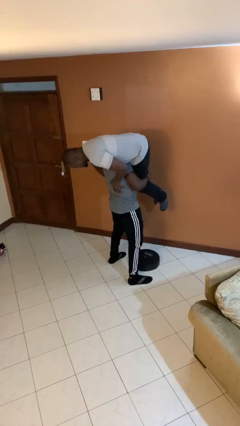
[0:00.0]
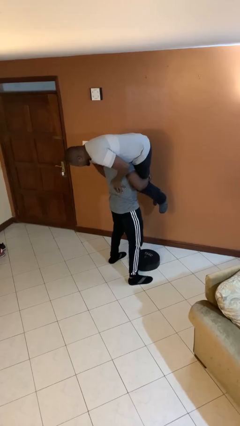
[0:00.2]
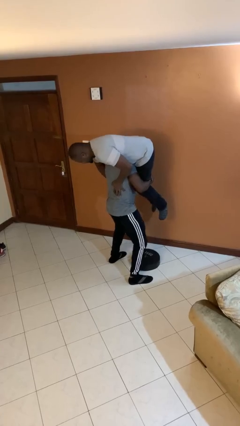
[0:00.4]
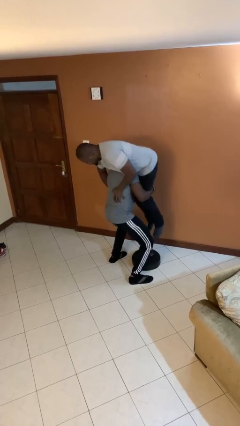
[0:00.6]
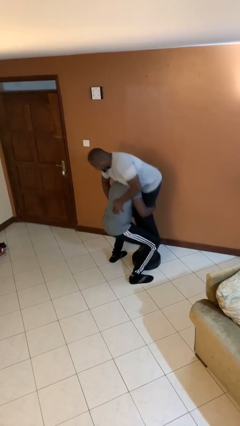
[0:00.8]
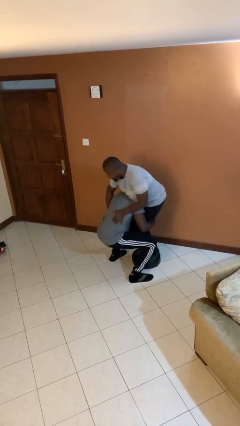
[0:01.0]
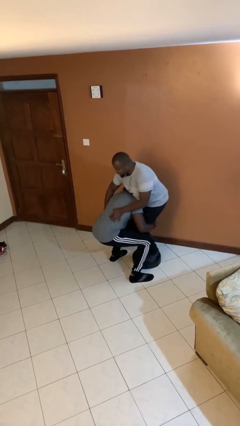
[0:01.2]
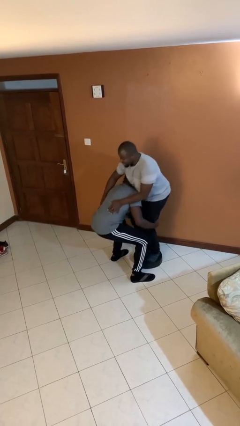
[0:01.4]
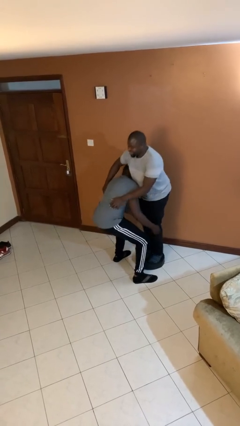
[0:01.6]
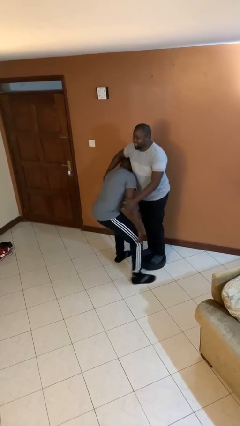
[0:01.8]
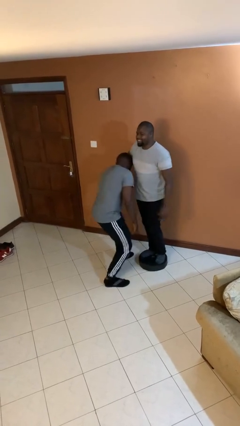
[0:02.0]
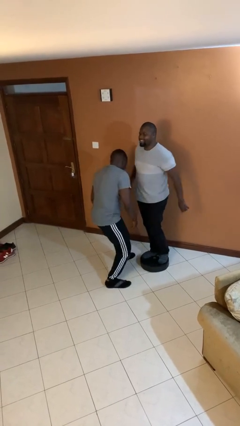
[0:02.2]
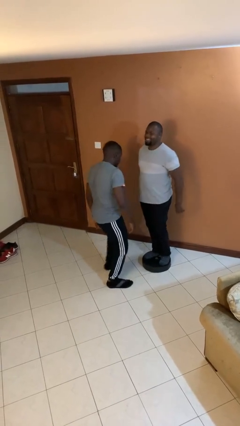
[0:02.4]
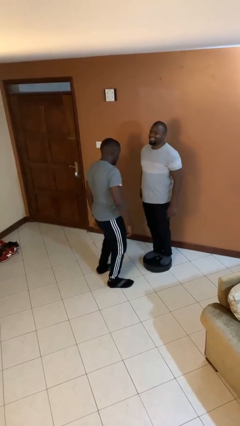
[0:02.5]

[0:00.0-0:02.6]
person puts down person

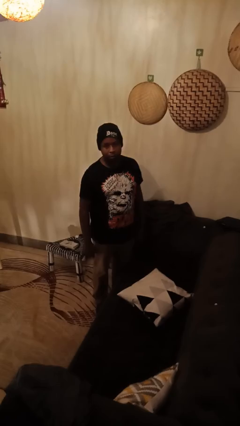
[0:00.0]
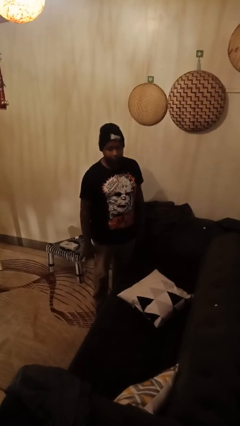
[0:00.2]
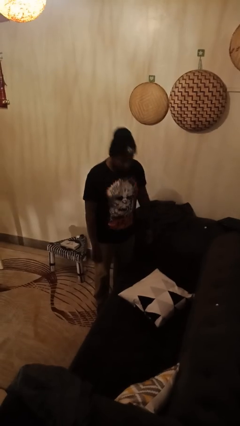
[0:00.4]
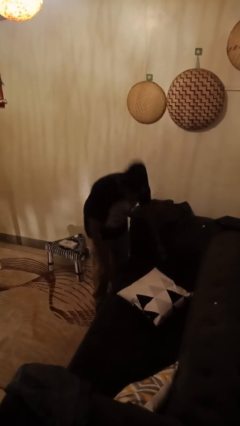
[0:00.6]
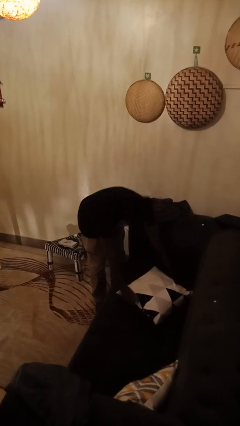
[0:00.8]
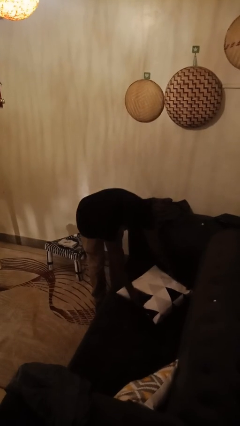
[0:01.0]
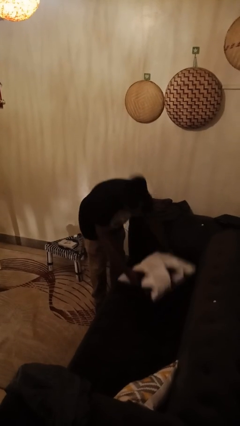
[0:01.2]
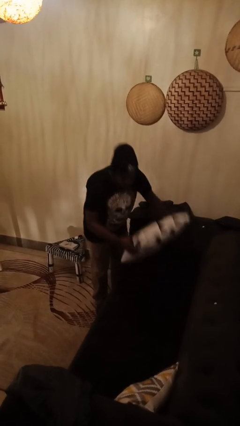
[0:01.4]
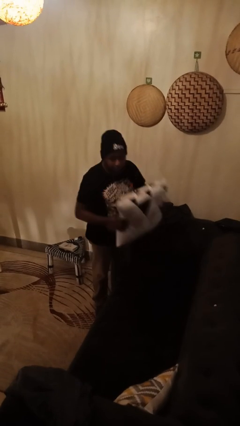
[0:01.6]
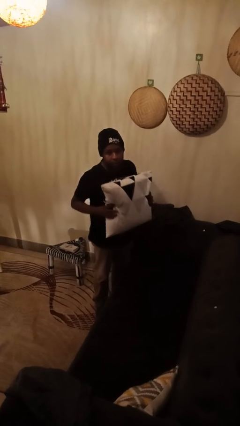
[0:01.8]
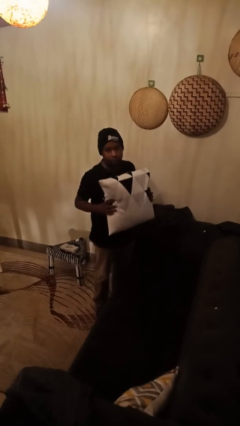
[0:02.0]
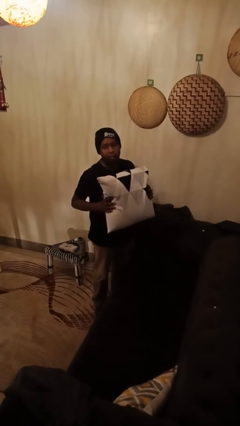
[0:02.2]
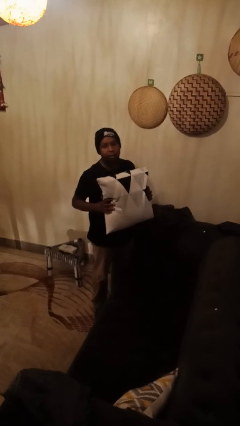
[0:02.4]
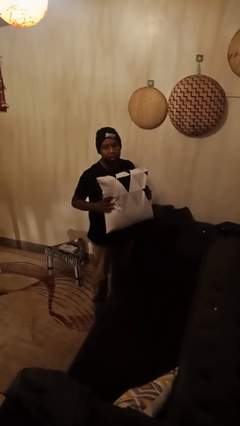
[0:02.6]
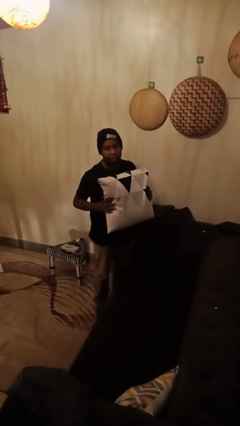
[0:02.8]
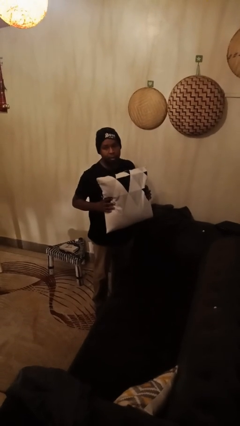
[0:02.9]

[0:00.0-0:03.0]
person picks up object from couch

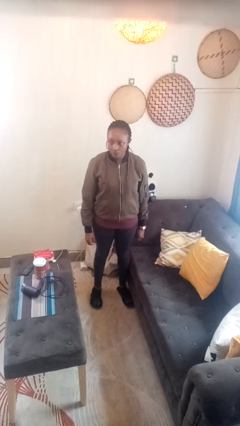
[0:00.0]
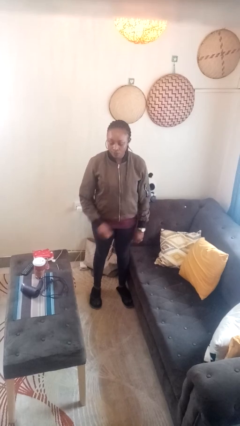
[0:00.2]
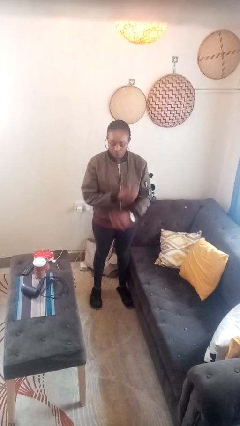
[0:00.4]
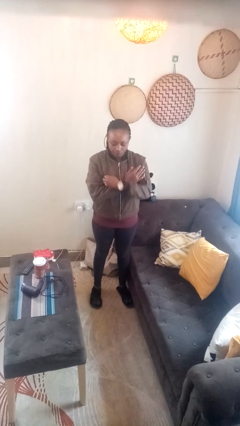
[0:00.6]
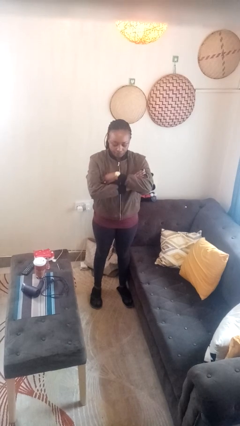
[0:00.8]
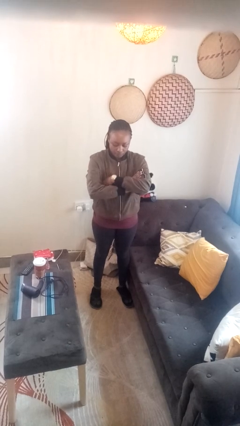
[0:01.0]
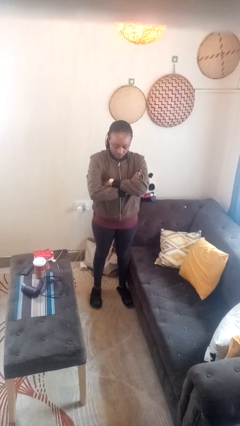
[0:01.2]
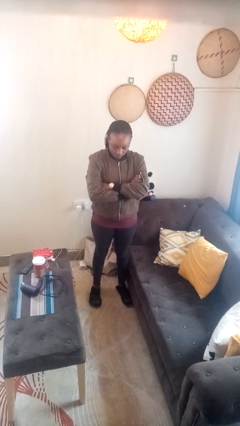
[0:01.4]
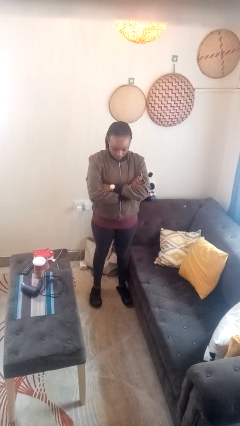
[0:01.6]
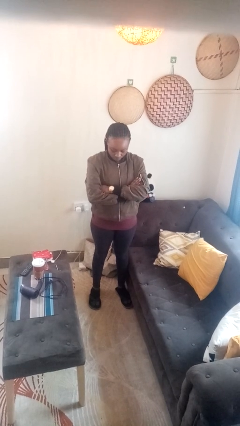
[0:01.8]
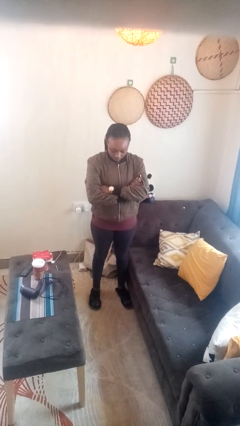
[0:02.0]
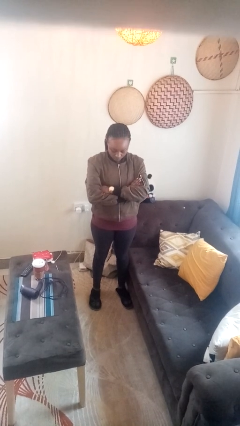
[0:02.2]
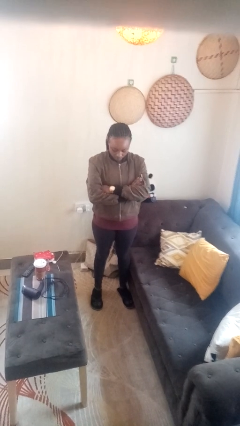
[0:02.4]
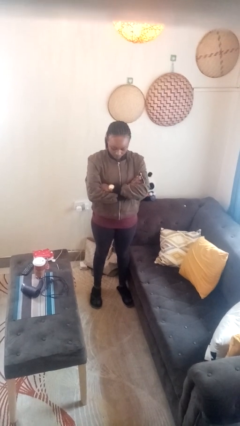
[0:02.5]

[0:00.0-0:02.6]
person gestures arms x

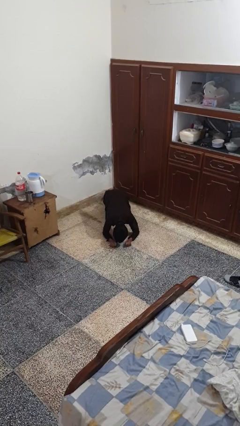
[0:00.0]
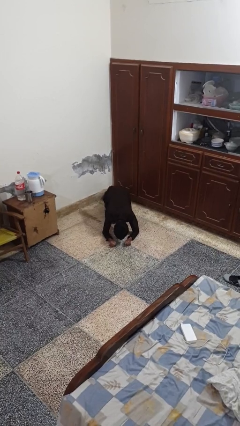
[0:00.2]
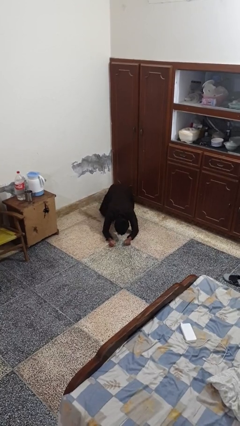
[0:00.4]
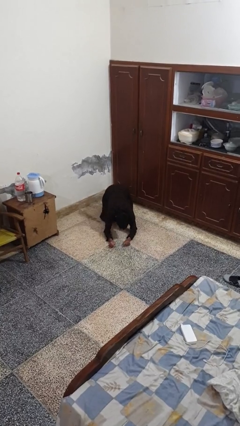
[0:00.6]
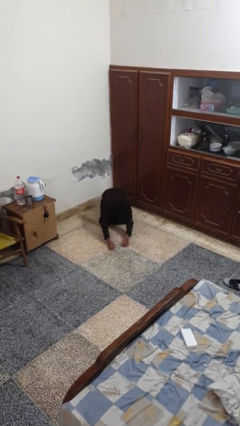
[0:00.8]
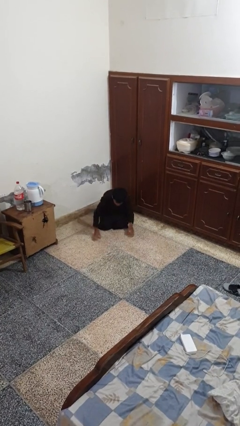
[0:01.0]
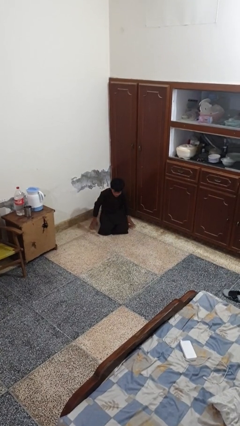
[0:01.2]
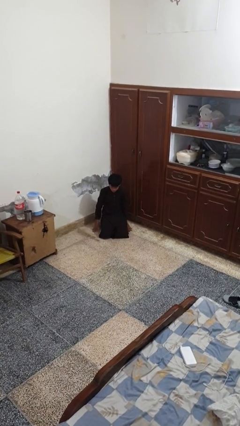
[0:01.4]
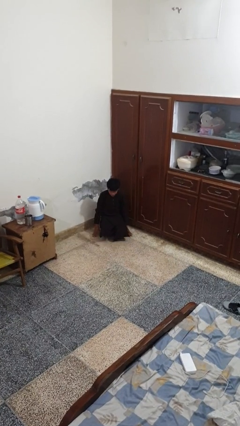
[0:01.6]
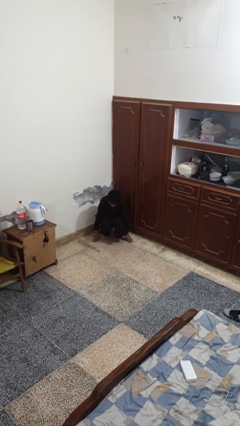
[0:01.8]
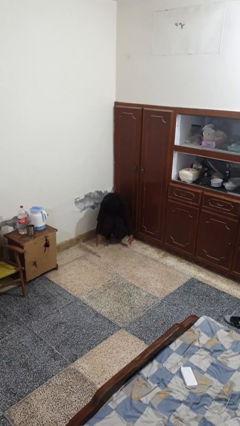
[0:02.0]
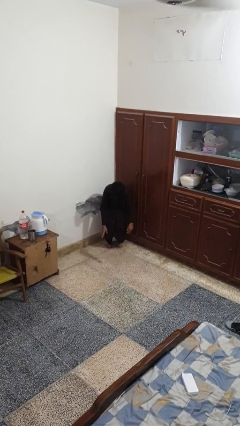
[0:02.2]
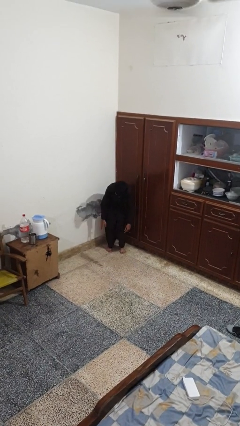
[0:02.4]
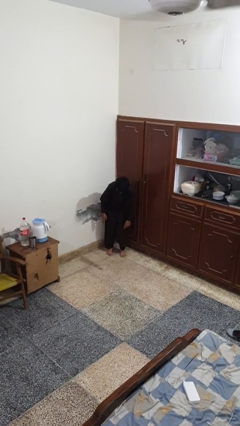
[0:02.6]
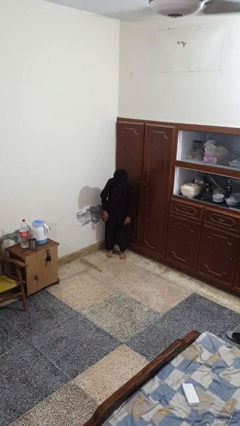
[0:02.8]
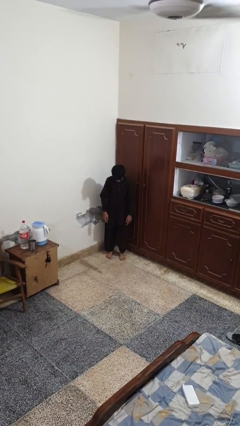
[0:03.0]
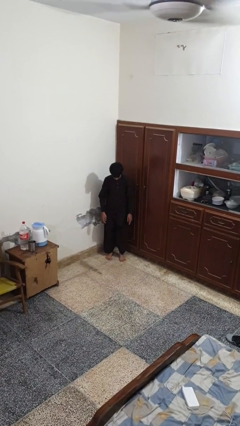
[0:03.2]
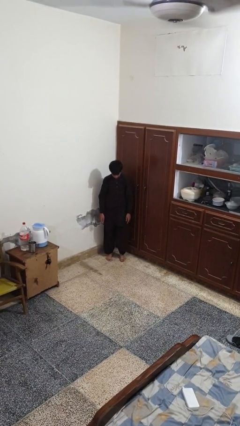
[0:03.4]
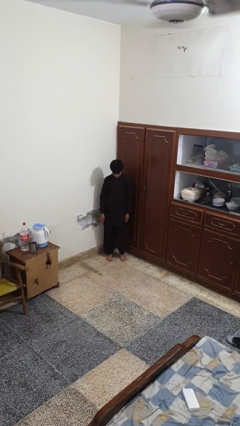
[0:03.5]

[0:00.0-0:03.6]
person stands up from floor

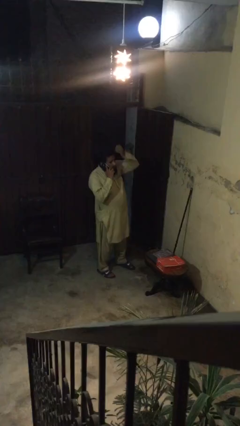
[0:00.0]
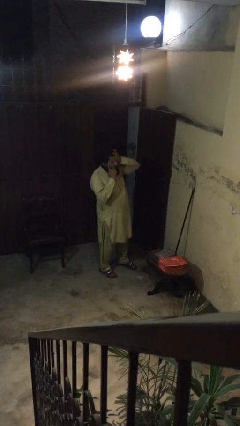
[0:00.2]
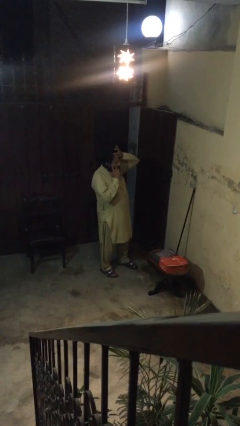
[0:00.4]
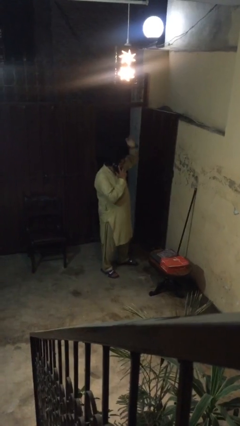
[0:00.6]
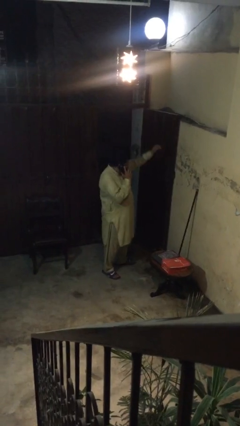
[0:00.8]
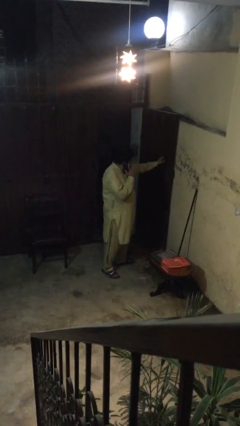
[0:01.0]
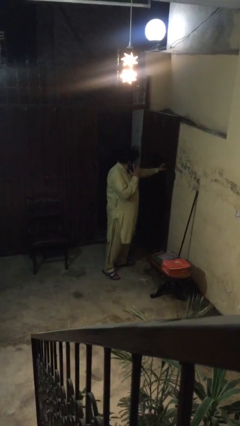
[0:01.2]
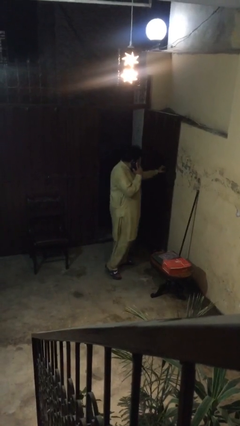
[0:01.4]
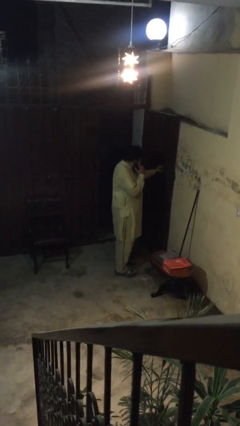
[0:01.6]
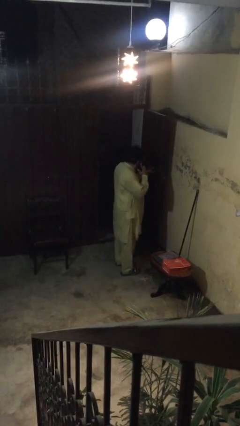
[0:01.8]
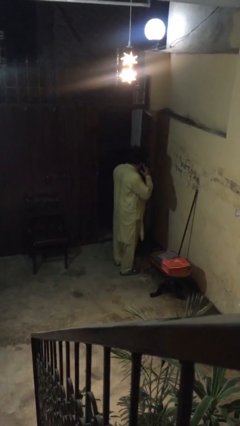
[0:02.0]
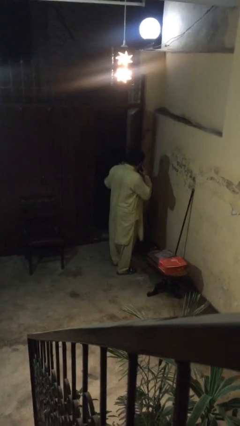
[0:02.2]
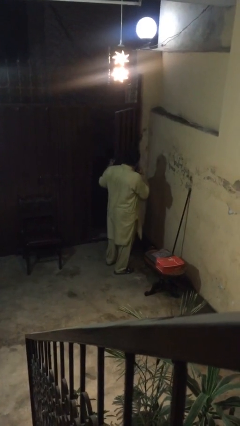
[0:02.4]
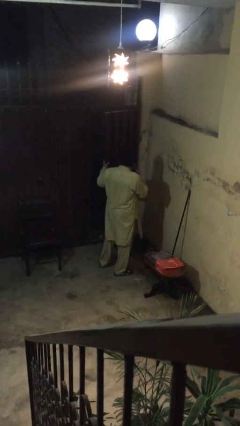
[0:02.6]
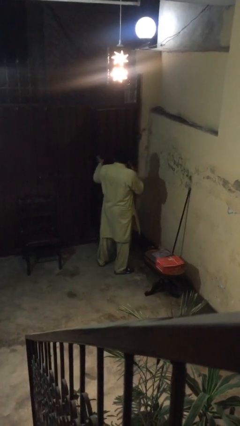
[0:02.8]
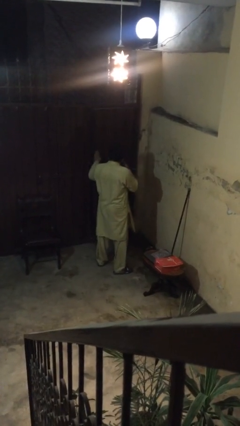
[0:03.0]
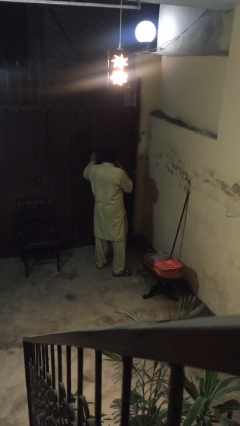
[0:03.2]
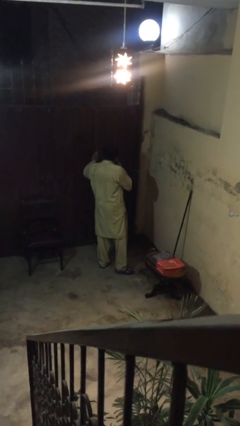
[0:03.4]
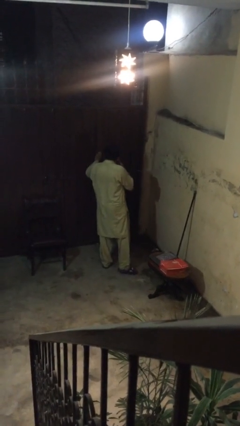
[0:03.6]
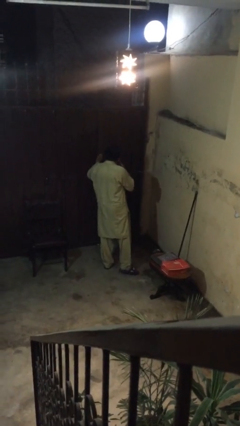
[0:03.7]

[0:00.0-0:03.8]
person closes facility door

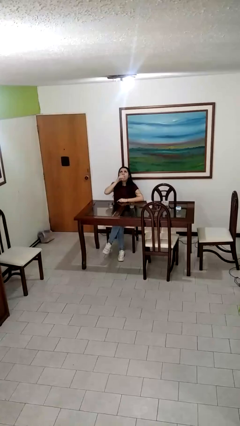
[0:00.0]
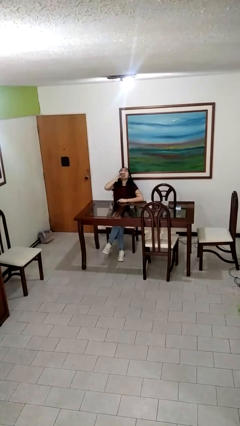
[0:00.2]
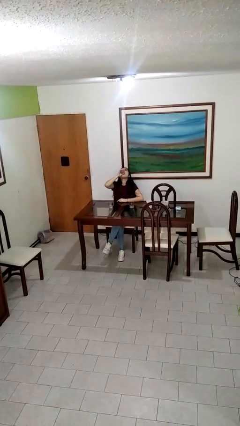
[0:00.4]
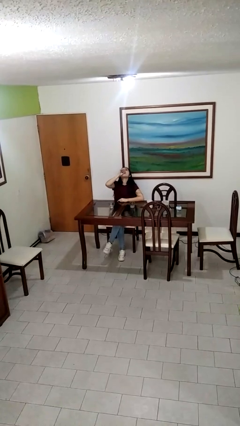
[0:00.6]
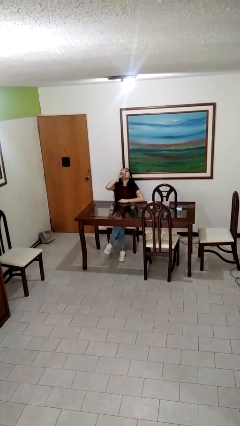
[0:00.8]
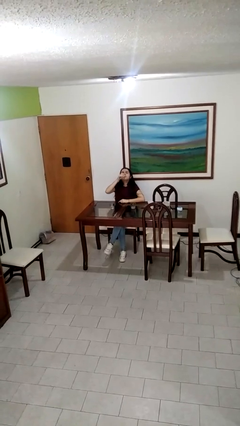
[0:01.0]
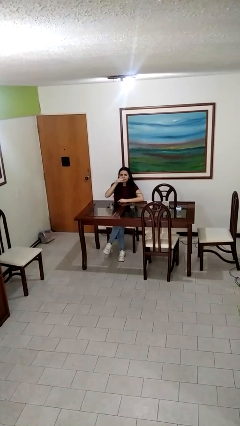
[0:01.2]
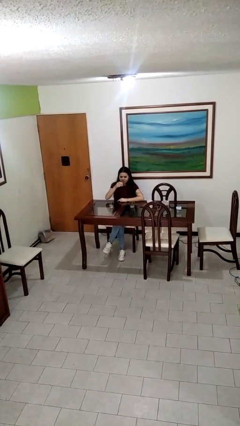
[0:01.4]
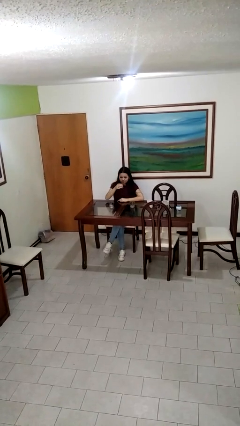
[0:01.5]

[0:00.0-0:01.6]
person drinks from shotglass

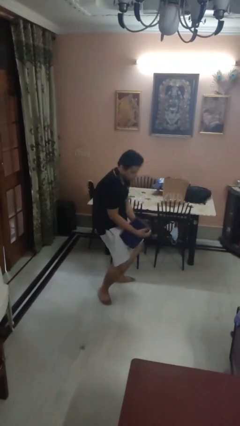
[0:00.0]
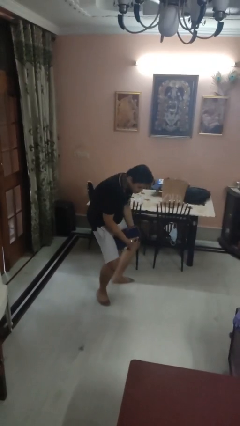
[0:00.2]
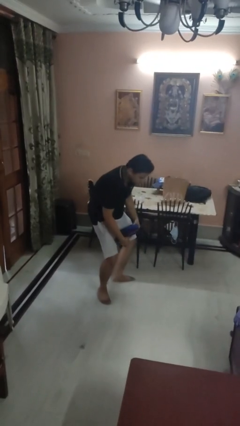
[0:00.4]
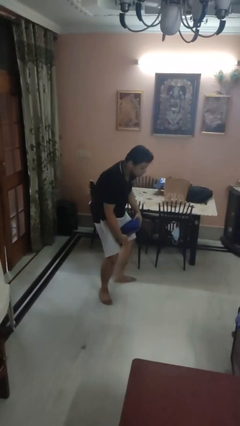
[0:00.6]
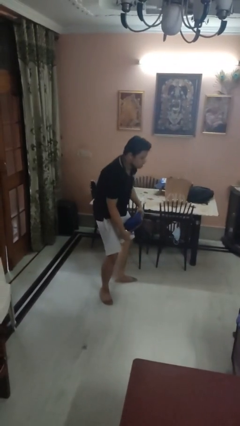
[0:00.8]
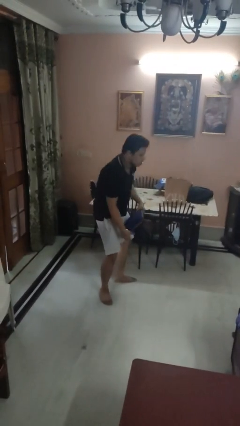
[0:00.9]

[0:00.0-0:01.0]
person catches dropped object
